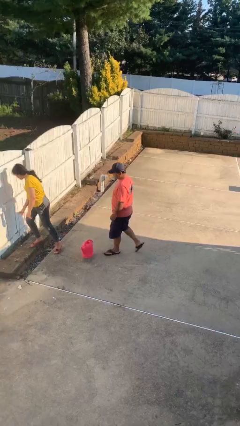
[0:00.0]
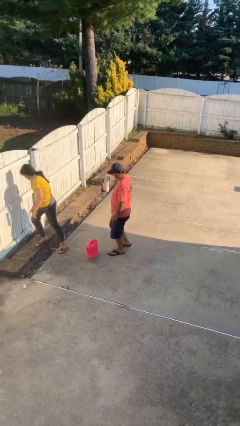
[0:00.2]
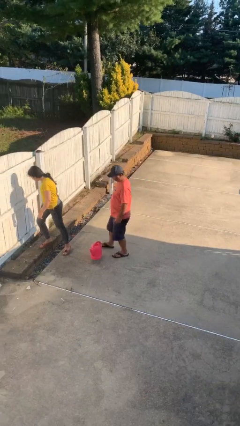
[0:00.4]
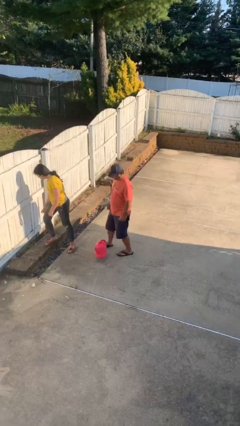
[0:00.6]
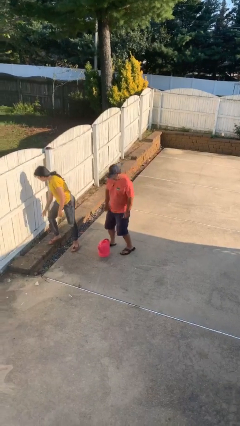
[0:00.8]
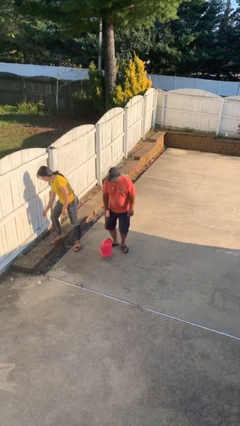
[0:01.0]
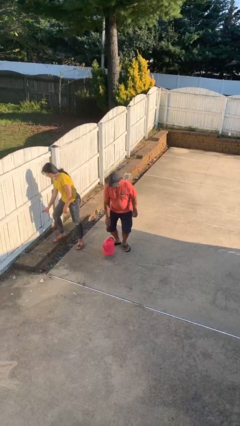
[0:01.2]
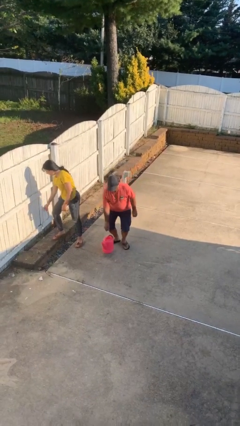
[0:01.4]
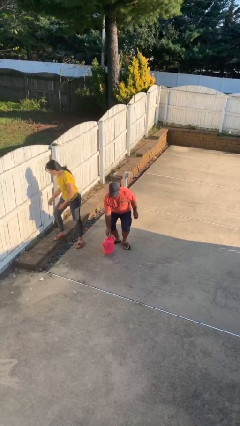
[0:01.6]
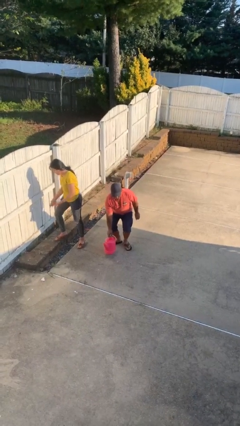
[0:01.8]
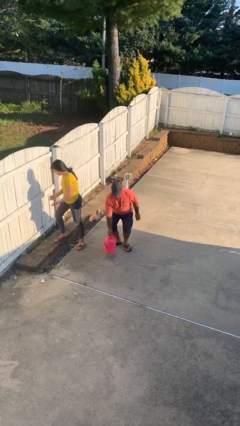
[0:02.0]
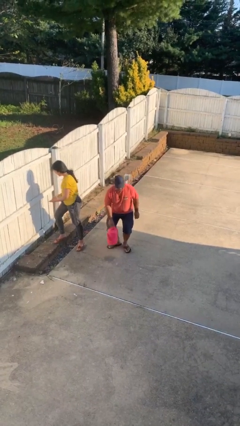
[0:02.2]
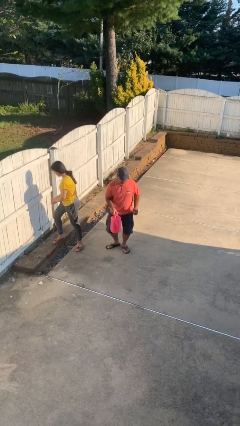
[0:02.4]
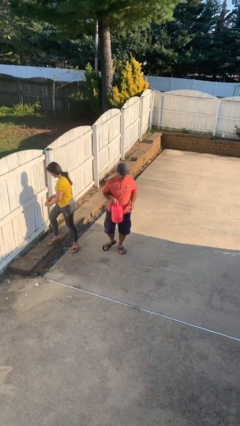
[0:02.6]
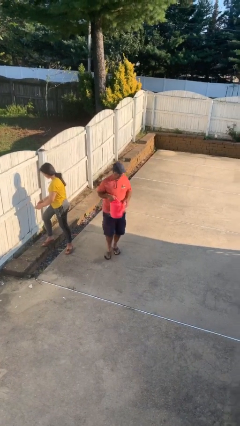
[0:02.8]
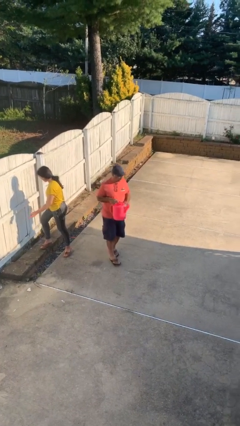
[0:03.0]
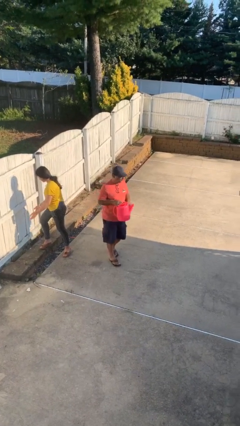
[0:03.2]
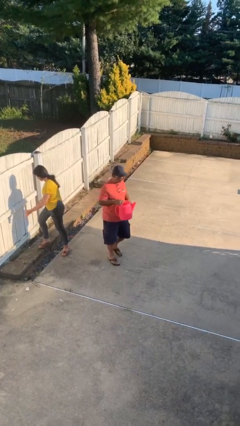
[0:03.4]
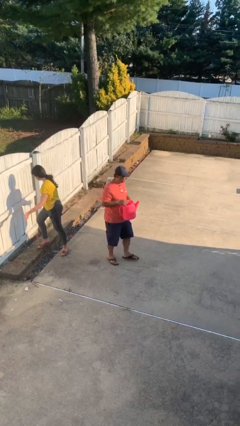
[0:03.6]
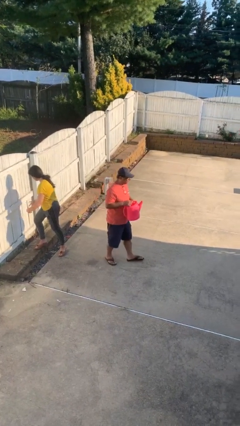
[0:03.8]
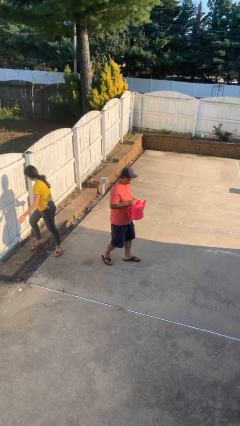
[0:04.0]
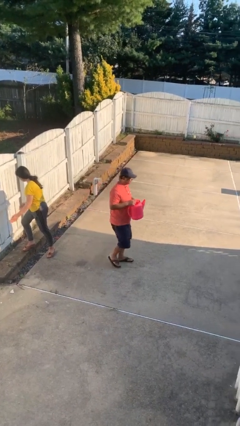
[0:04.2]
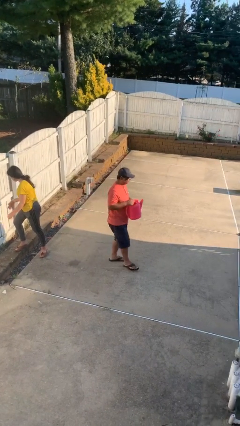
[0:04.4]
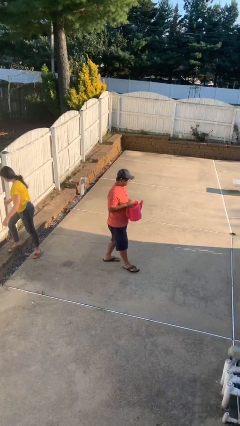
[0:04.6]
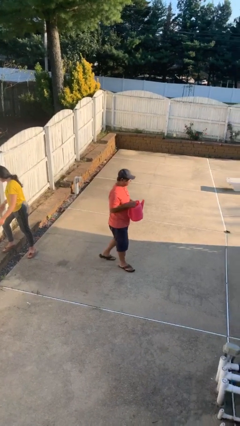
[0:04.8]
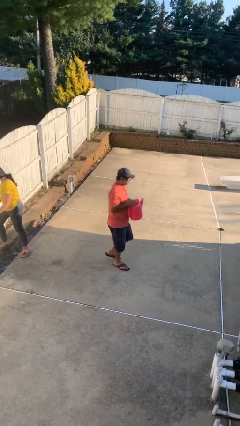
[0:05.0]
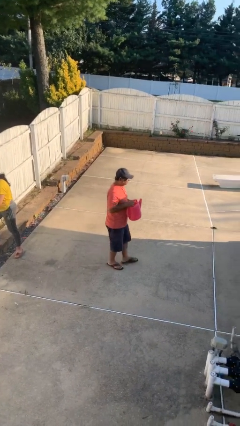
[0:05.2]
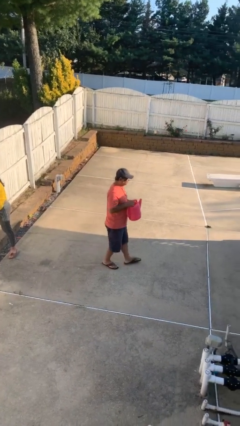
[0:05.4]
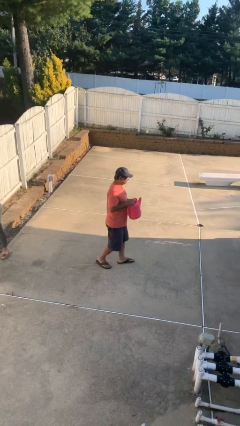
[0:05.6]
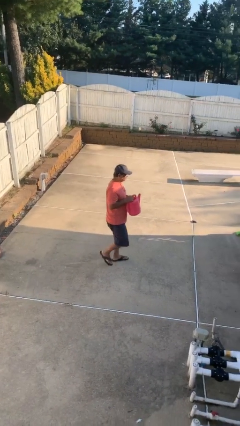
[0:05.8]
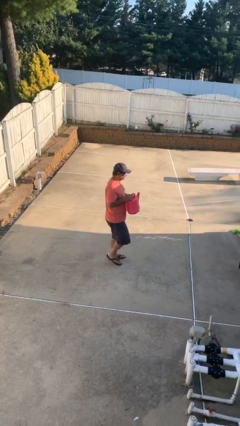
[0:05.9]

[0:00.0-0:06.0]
person steals object from person

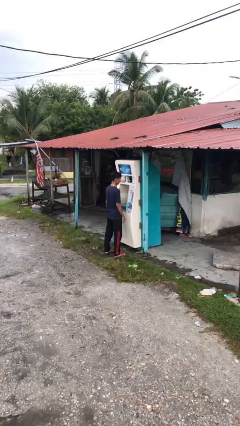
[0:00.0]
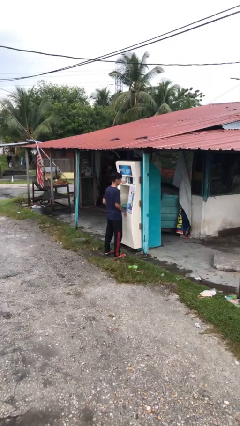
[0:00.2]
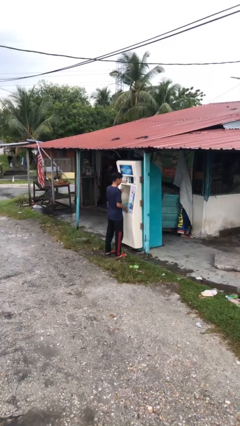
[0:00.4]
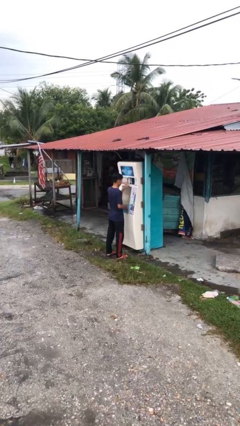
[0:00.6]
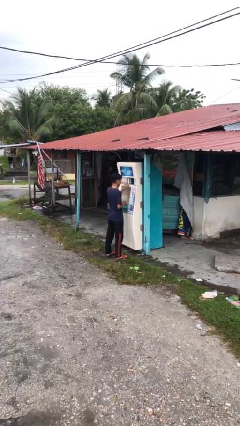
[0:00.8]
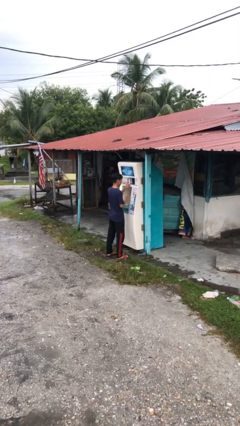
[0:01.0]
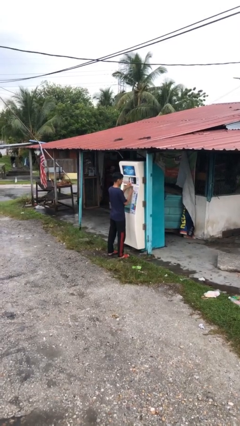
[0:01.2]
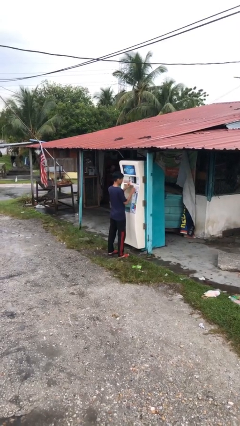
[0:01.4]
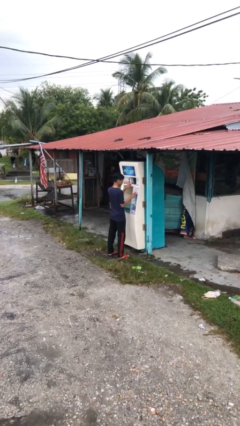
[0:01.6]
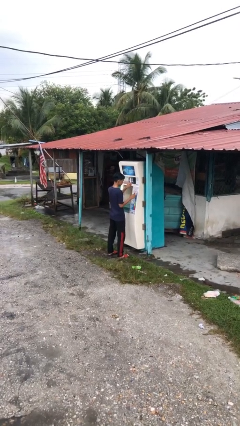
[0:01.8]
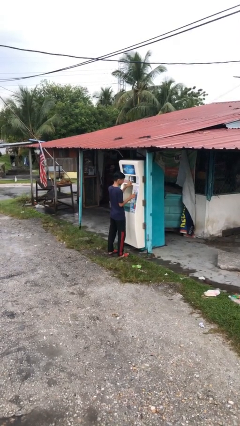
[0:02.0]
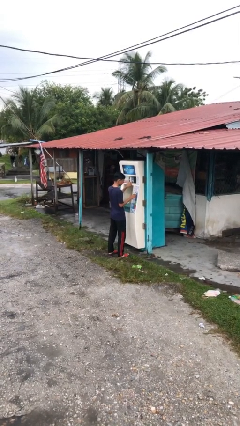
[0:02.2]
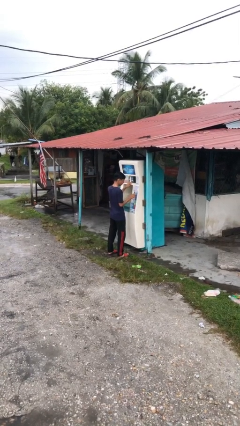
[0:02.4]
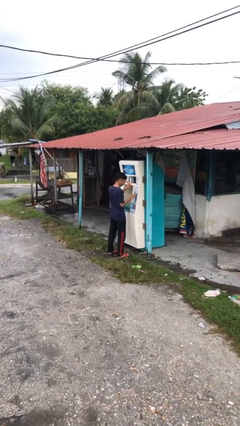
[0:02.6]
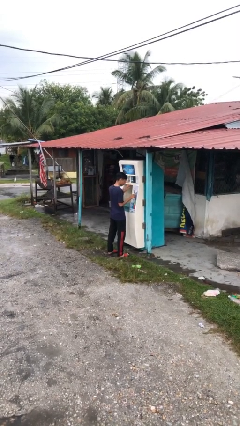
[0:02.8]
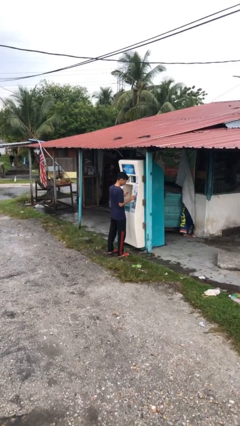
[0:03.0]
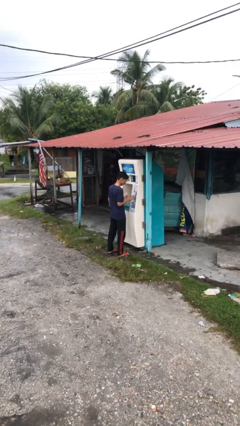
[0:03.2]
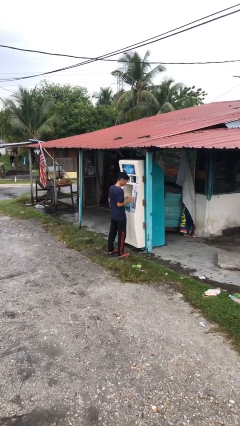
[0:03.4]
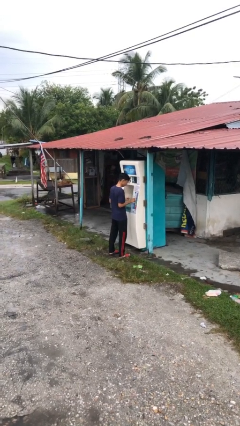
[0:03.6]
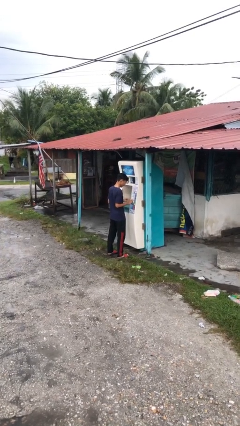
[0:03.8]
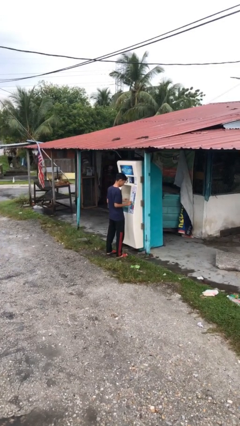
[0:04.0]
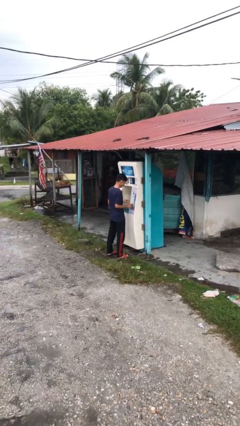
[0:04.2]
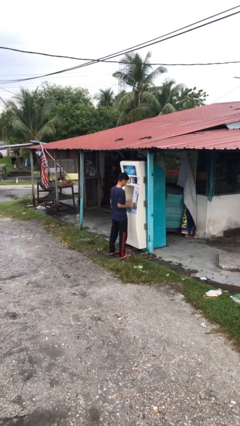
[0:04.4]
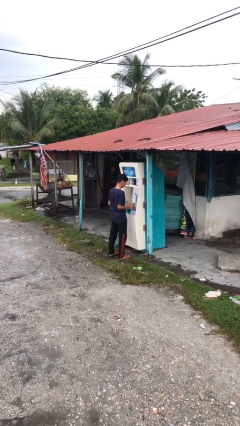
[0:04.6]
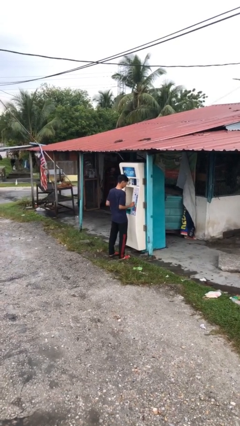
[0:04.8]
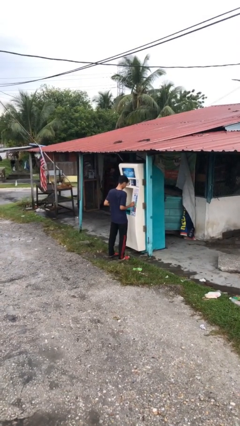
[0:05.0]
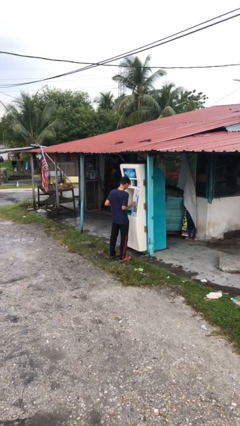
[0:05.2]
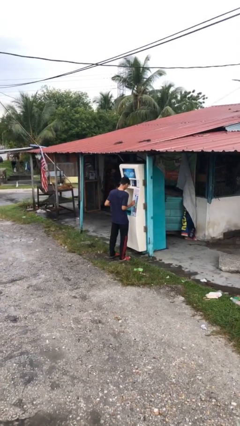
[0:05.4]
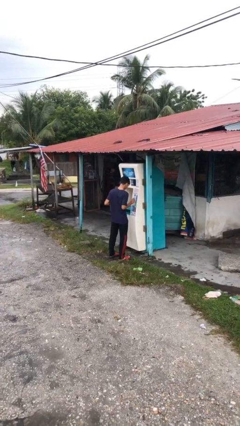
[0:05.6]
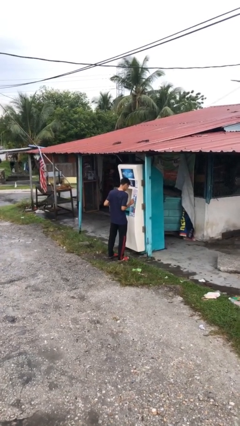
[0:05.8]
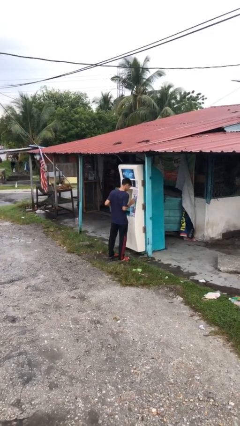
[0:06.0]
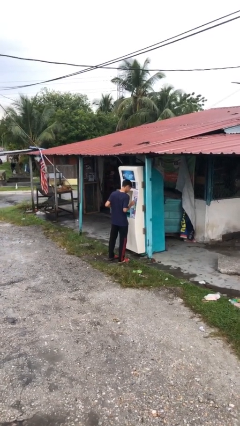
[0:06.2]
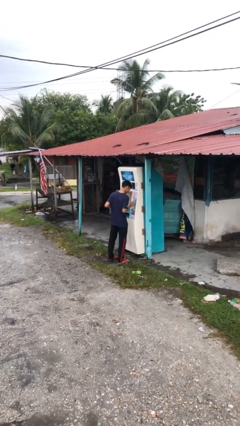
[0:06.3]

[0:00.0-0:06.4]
person purchases from machine

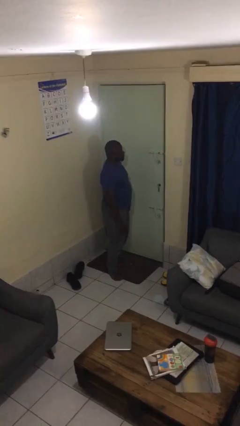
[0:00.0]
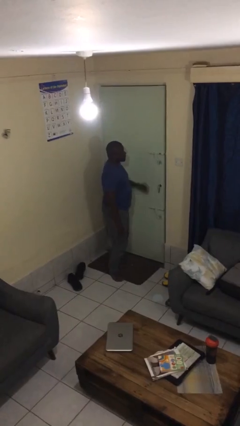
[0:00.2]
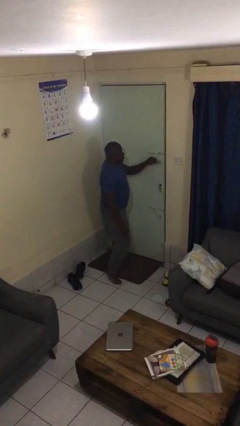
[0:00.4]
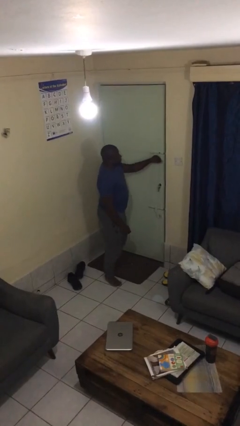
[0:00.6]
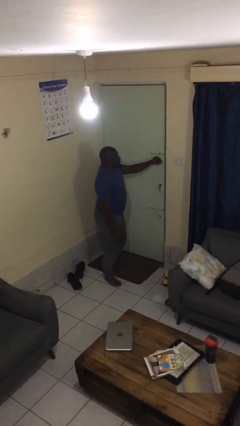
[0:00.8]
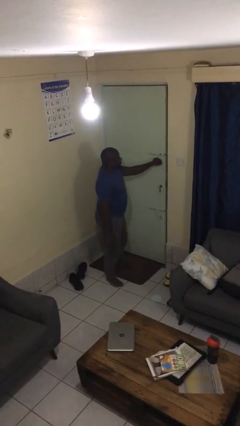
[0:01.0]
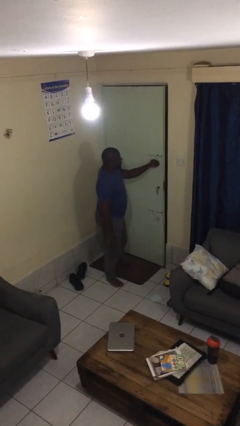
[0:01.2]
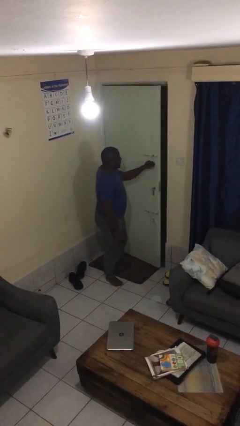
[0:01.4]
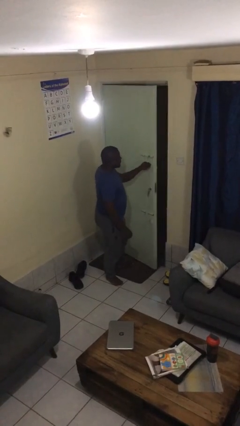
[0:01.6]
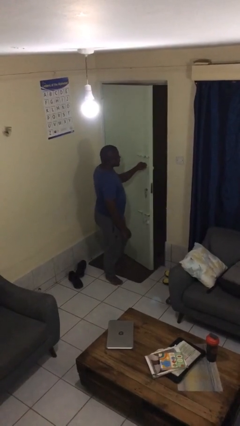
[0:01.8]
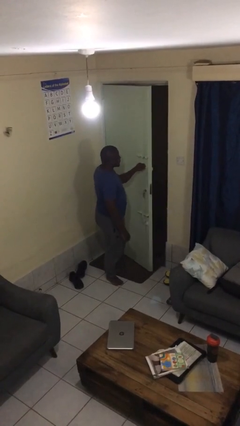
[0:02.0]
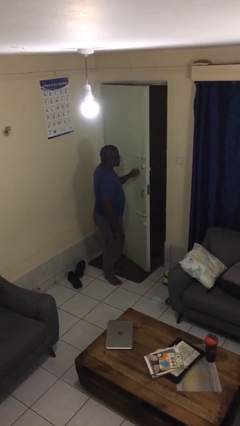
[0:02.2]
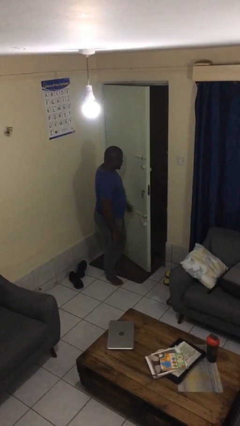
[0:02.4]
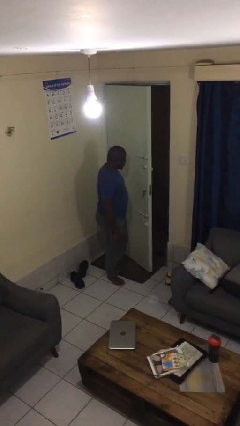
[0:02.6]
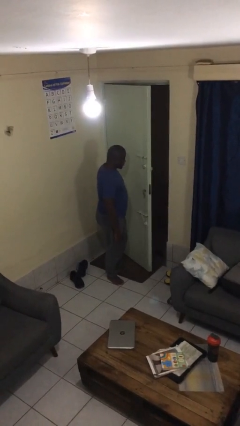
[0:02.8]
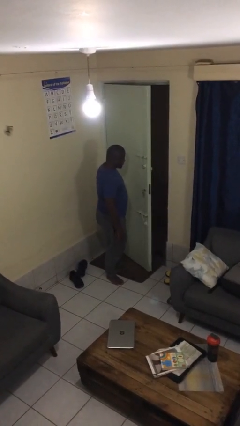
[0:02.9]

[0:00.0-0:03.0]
person opens facility door

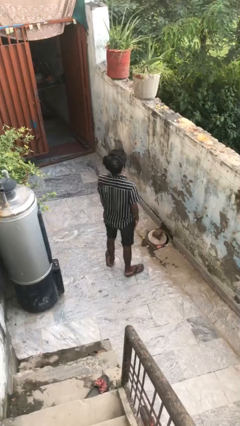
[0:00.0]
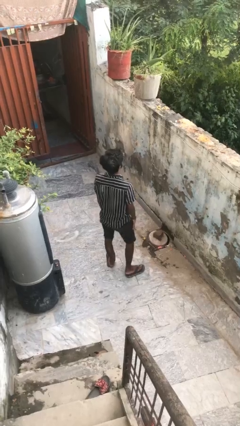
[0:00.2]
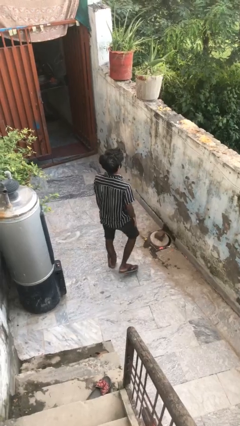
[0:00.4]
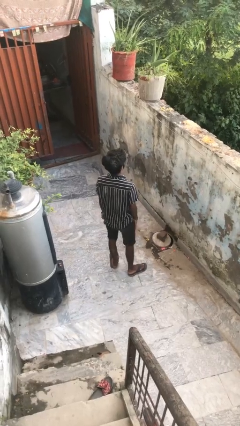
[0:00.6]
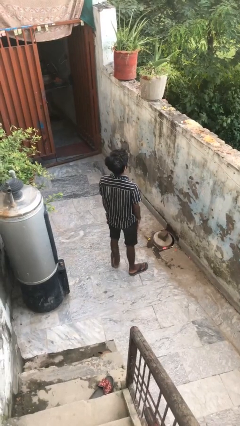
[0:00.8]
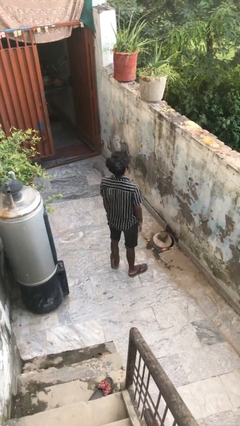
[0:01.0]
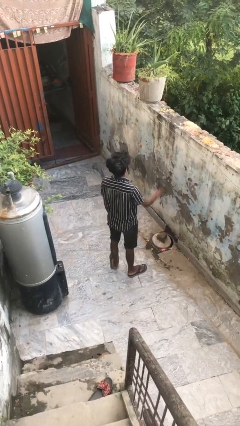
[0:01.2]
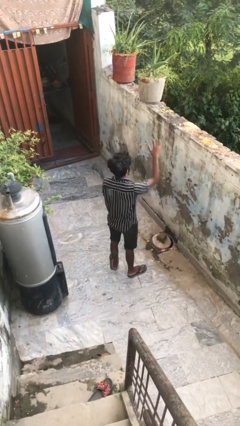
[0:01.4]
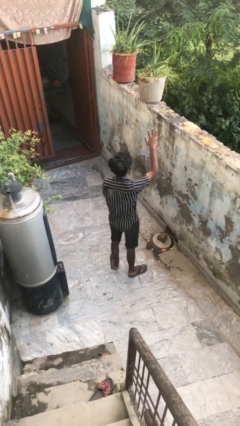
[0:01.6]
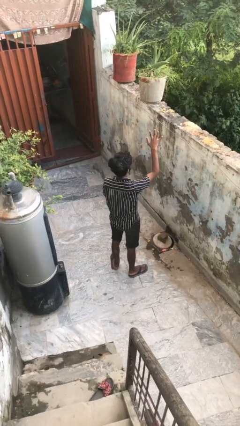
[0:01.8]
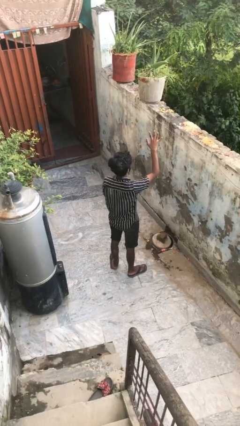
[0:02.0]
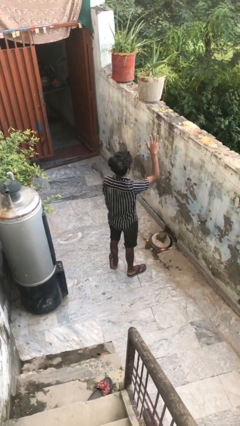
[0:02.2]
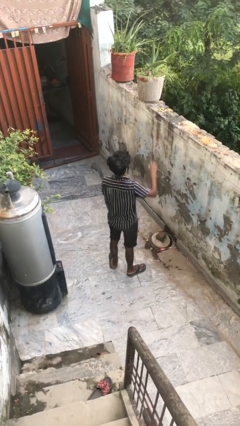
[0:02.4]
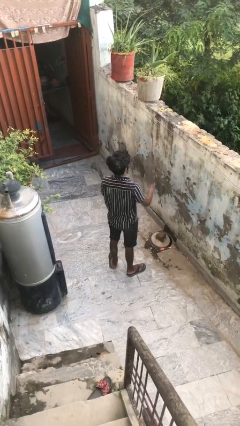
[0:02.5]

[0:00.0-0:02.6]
person gestures number five
